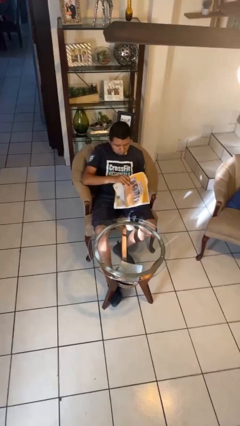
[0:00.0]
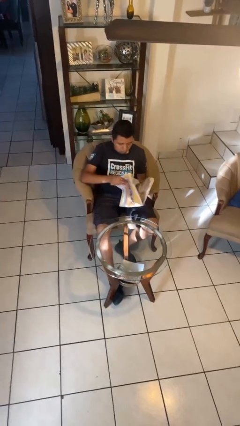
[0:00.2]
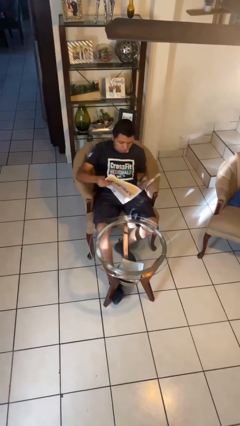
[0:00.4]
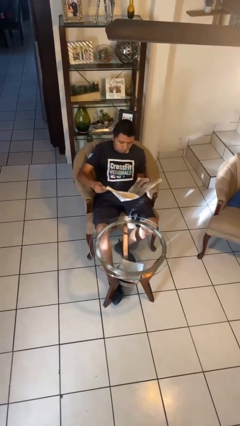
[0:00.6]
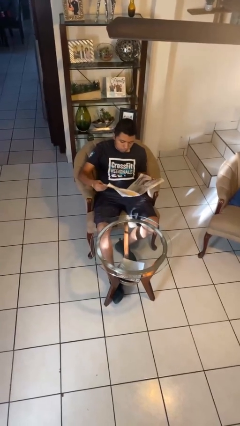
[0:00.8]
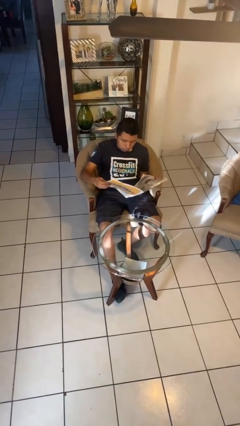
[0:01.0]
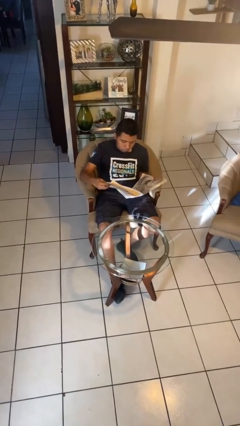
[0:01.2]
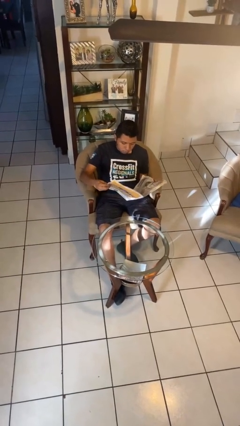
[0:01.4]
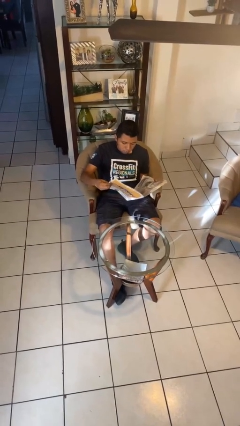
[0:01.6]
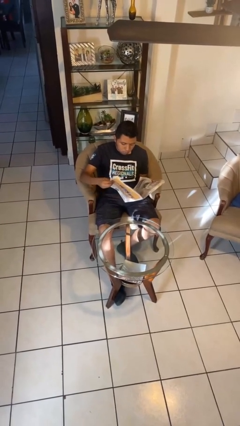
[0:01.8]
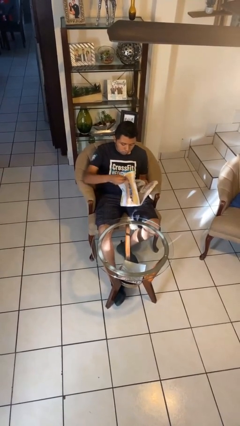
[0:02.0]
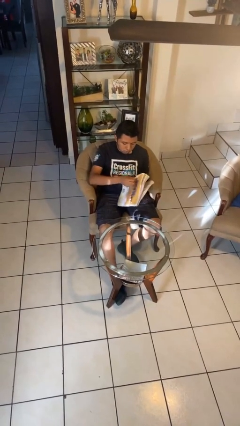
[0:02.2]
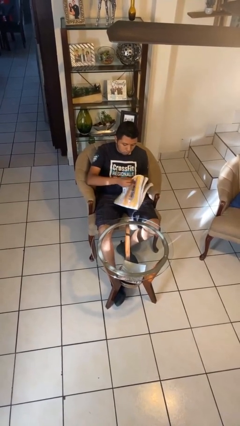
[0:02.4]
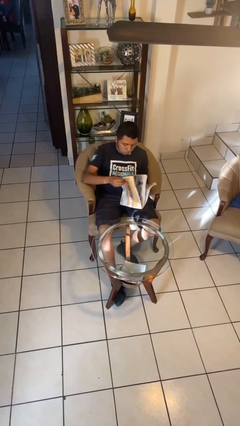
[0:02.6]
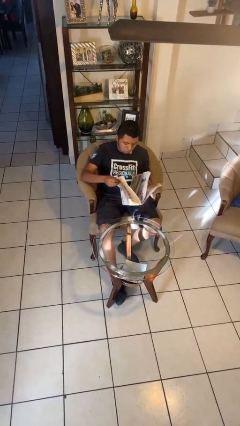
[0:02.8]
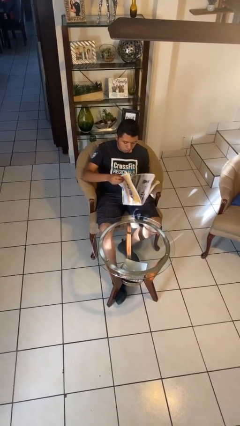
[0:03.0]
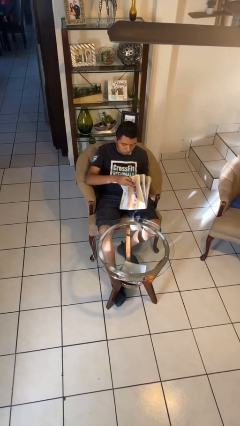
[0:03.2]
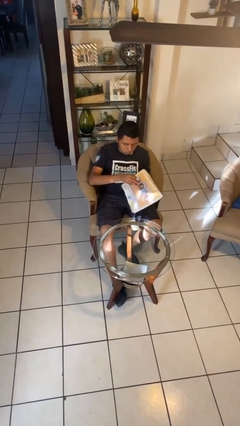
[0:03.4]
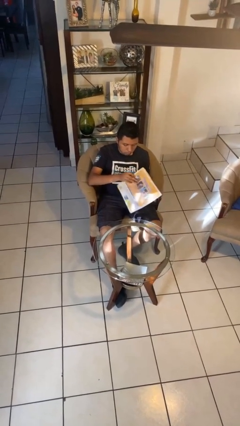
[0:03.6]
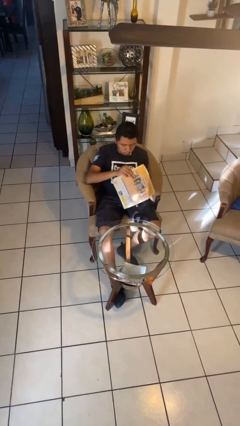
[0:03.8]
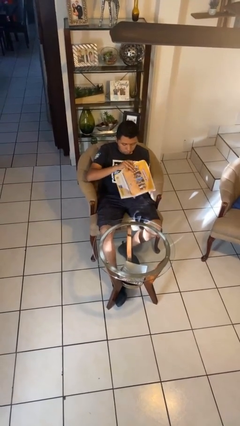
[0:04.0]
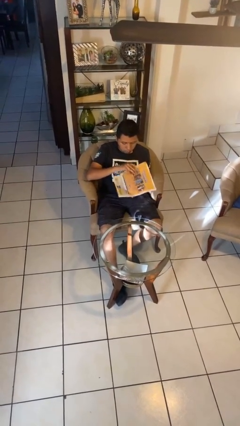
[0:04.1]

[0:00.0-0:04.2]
person reads newspaper

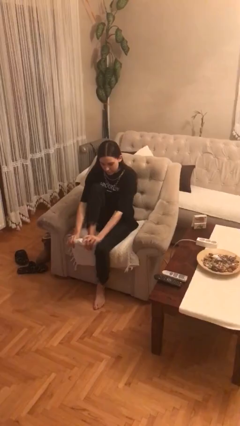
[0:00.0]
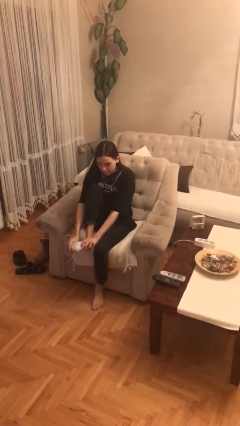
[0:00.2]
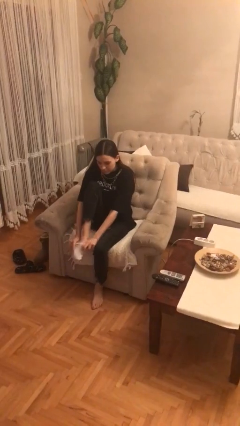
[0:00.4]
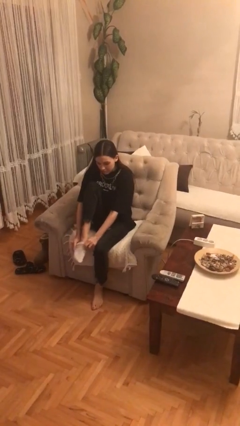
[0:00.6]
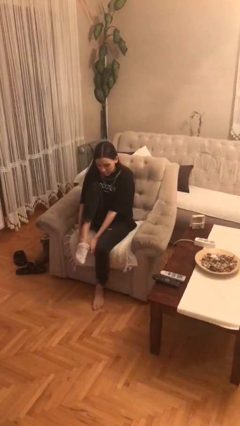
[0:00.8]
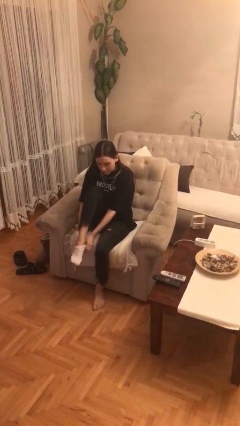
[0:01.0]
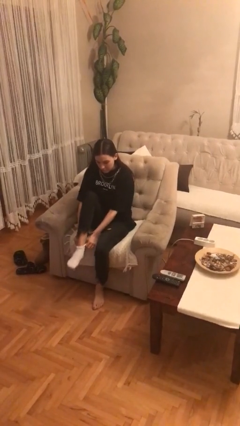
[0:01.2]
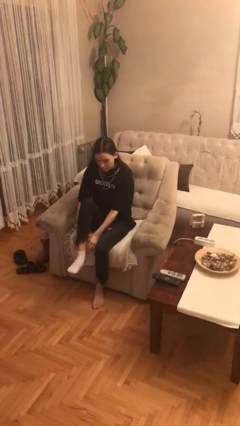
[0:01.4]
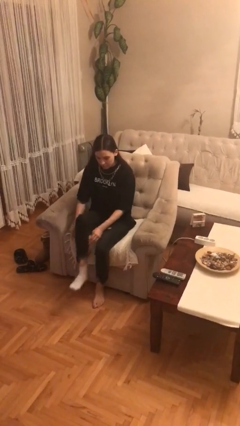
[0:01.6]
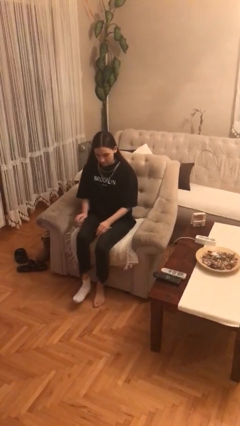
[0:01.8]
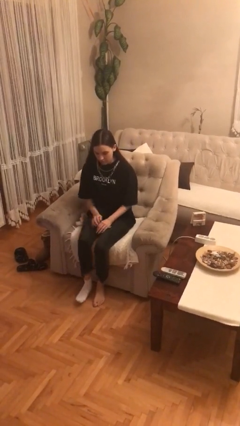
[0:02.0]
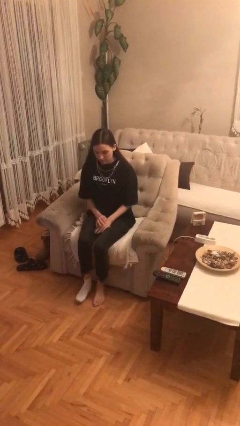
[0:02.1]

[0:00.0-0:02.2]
person puts on socks

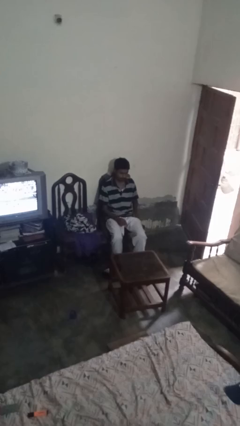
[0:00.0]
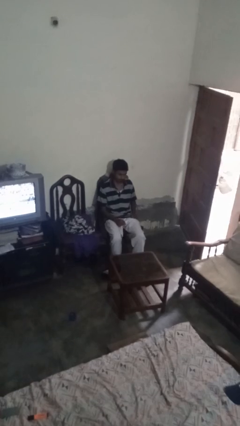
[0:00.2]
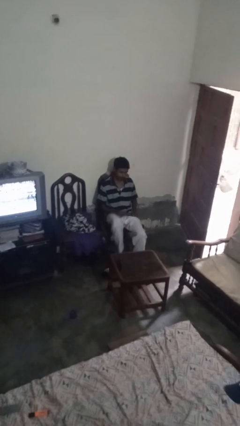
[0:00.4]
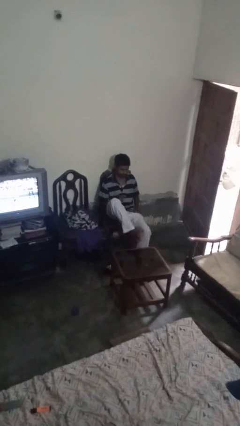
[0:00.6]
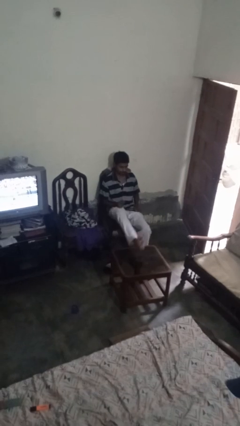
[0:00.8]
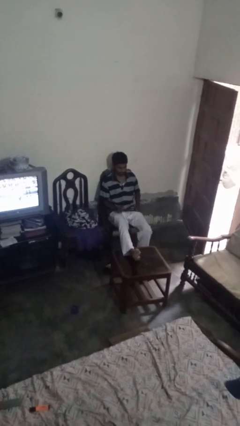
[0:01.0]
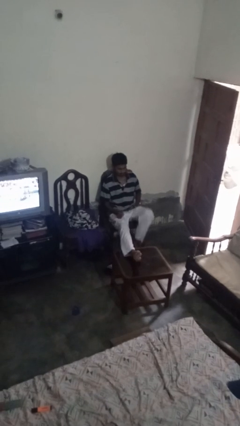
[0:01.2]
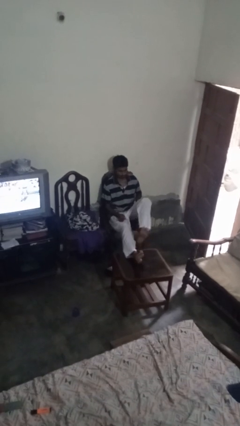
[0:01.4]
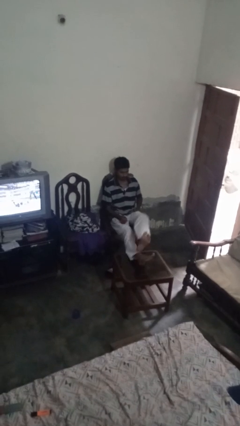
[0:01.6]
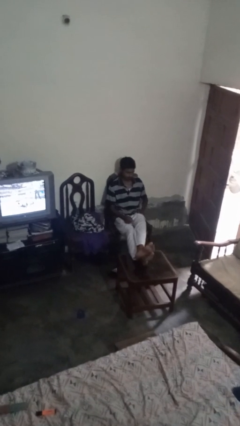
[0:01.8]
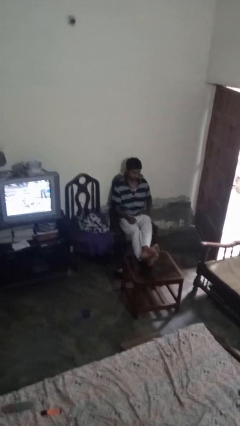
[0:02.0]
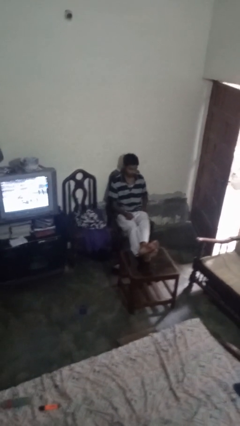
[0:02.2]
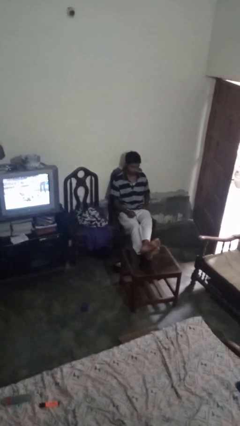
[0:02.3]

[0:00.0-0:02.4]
person puts feet up

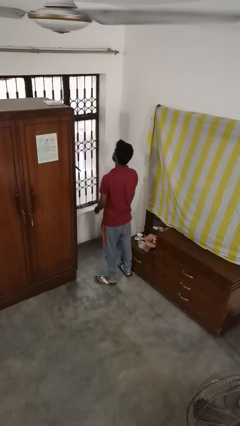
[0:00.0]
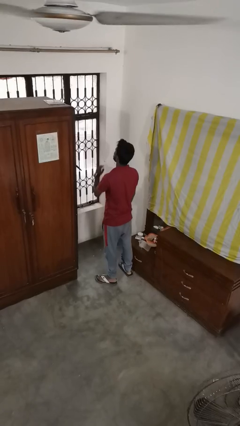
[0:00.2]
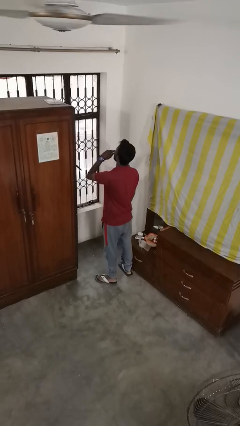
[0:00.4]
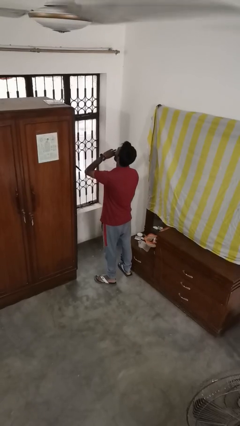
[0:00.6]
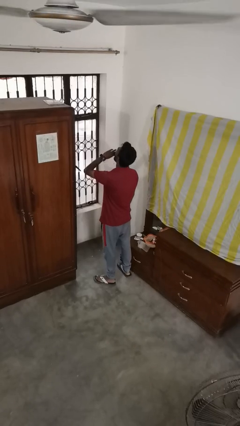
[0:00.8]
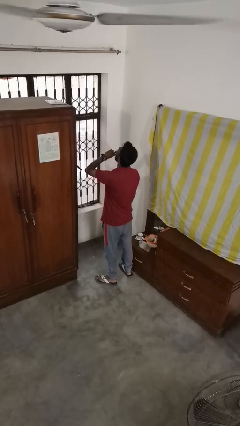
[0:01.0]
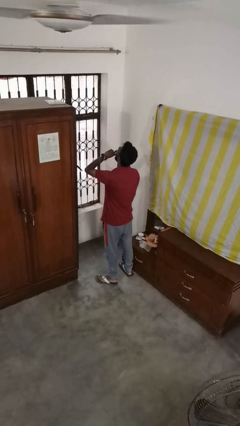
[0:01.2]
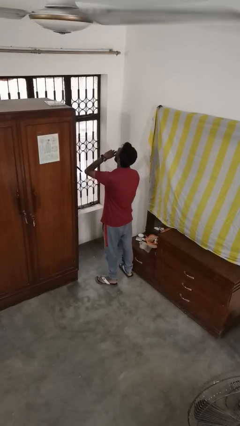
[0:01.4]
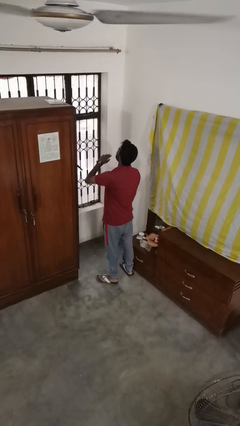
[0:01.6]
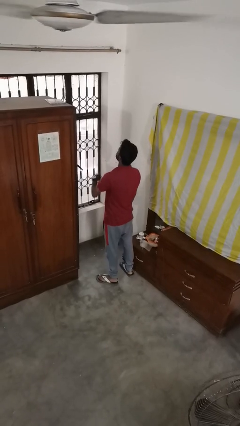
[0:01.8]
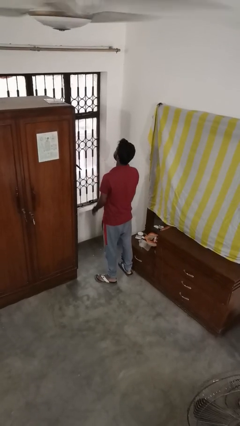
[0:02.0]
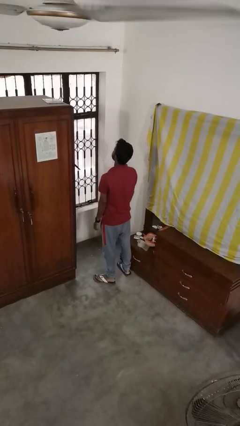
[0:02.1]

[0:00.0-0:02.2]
person yawns

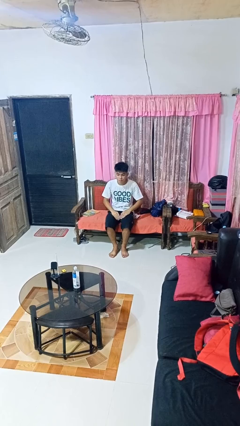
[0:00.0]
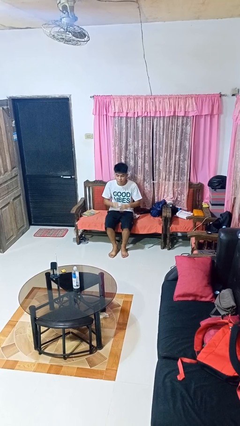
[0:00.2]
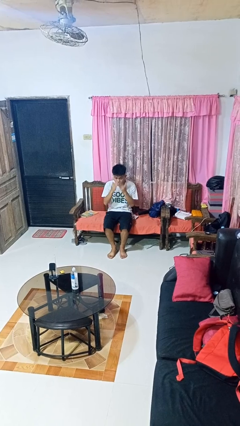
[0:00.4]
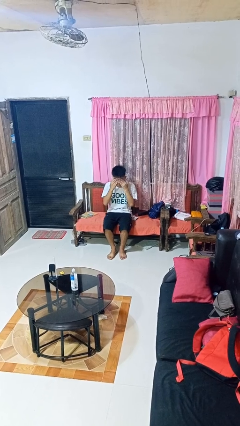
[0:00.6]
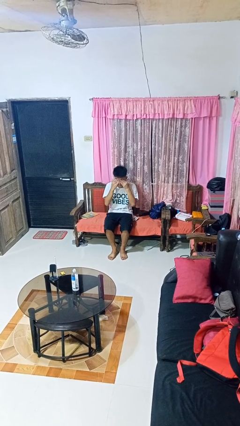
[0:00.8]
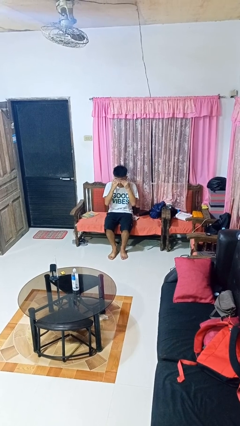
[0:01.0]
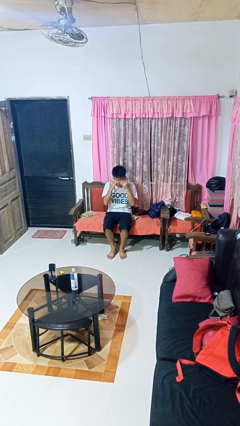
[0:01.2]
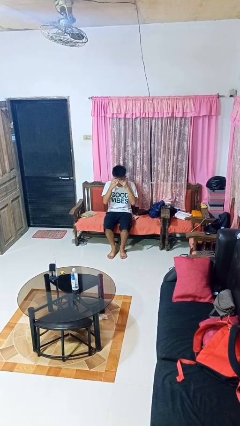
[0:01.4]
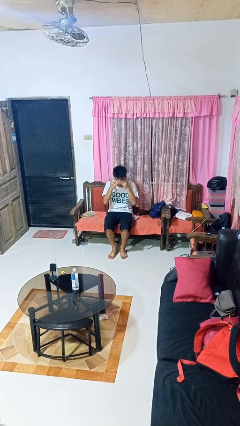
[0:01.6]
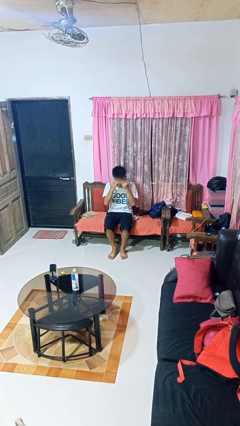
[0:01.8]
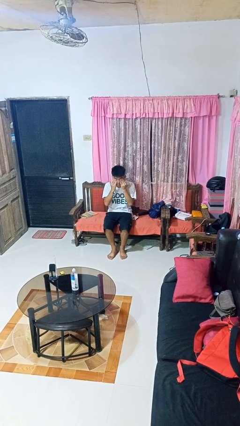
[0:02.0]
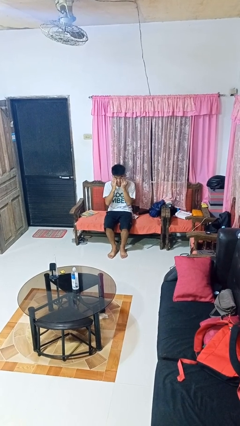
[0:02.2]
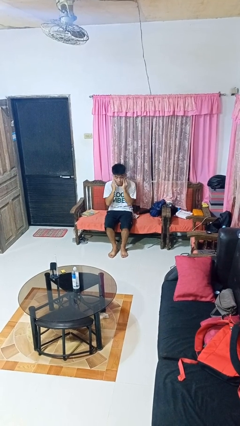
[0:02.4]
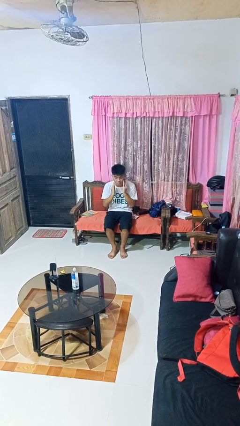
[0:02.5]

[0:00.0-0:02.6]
person rubs eyes

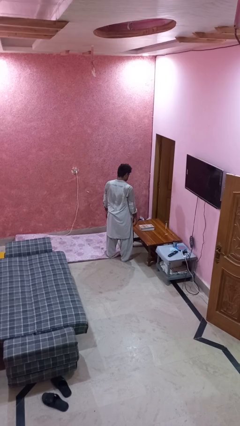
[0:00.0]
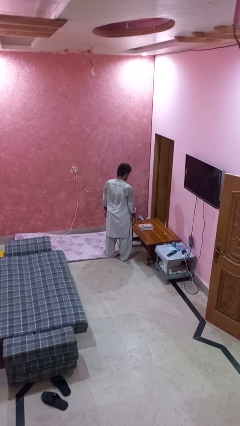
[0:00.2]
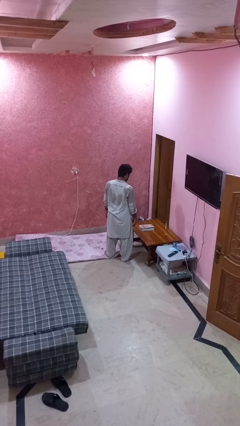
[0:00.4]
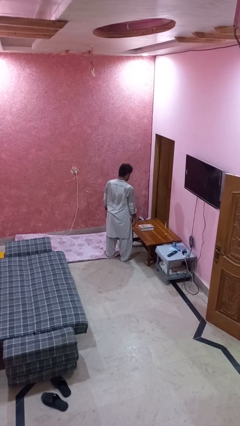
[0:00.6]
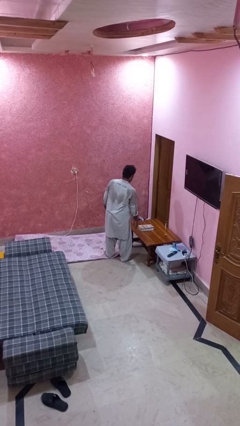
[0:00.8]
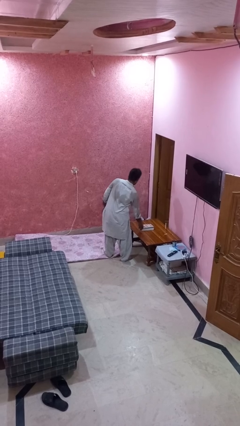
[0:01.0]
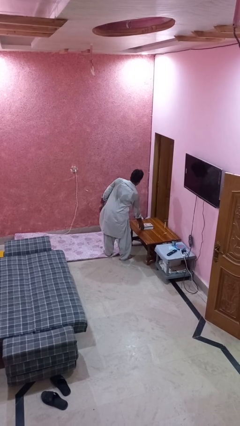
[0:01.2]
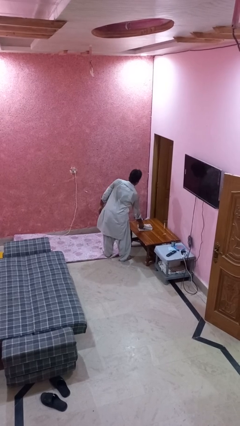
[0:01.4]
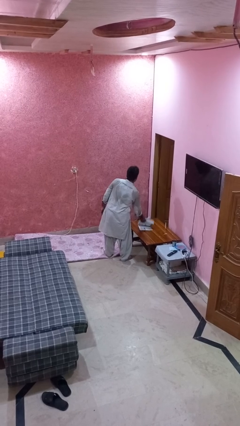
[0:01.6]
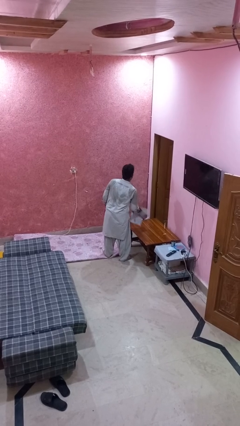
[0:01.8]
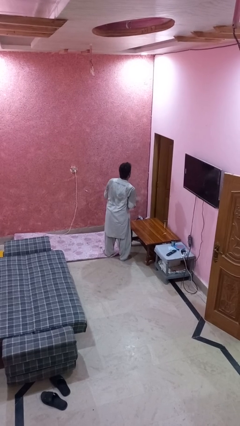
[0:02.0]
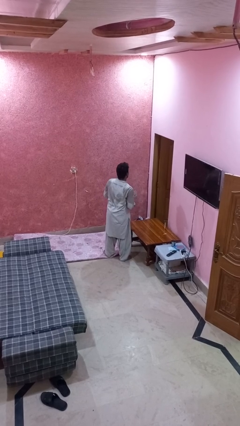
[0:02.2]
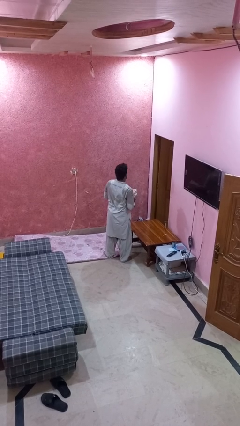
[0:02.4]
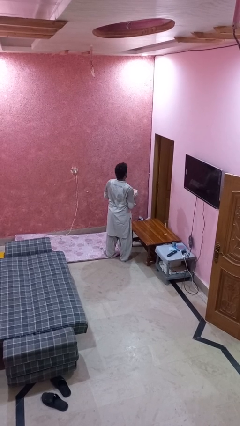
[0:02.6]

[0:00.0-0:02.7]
person picks up object from table

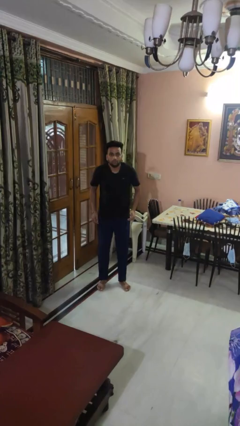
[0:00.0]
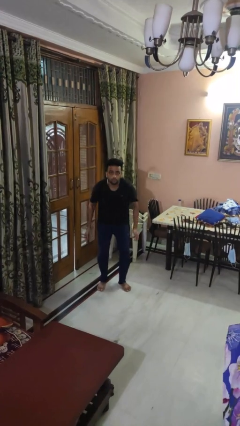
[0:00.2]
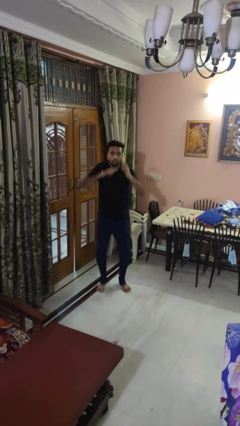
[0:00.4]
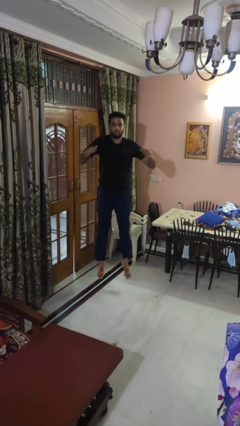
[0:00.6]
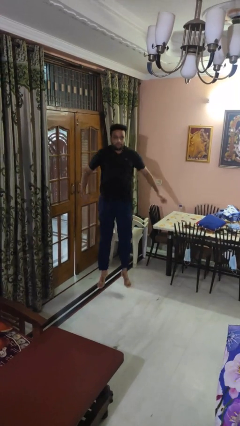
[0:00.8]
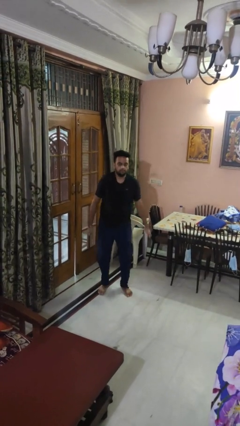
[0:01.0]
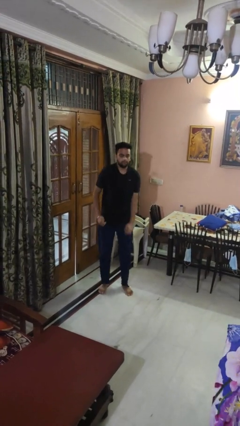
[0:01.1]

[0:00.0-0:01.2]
person jumps
